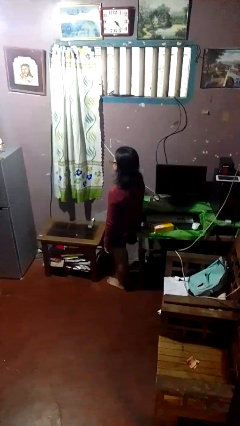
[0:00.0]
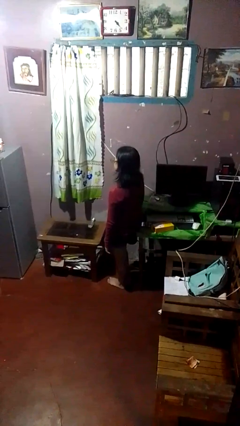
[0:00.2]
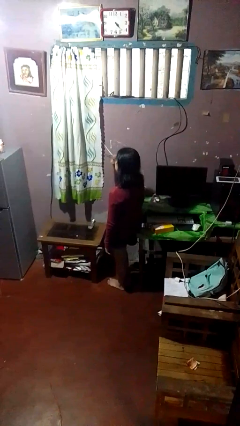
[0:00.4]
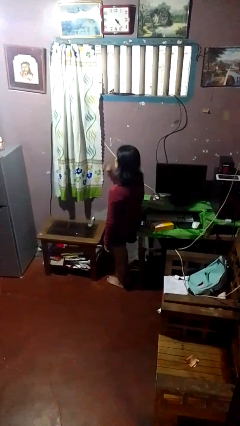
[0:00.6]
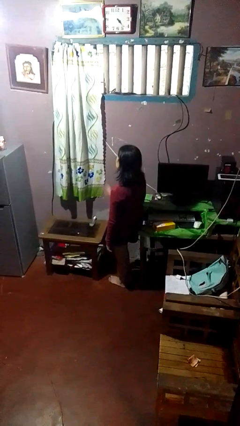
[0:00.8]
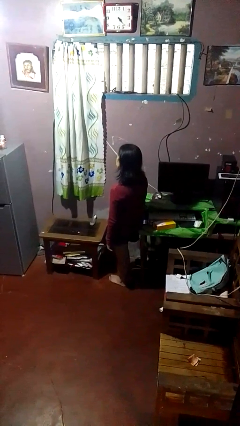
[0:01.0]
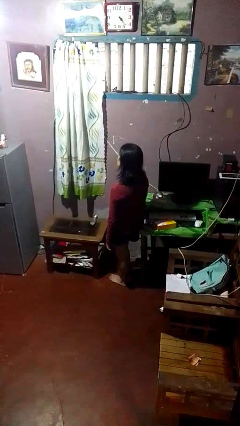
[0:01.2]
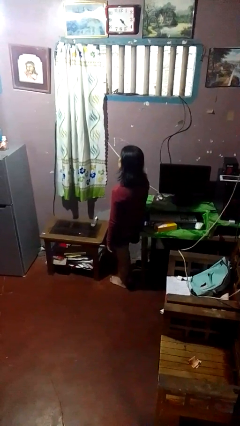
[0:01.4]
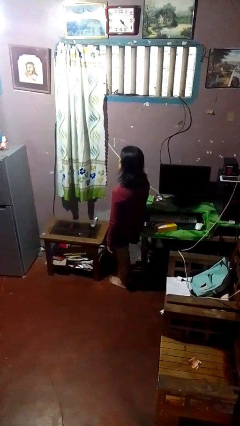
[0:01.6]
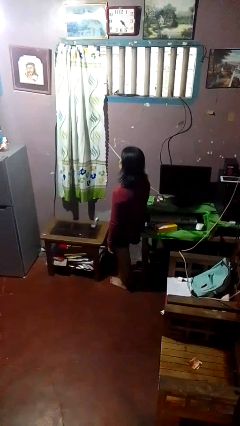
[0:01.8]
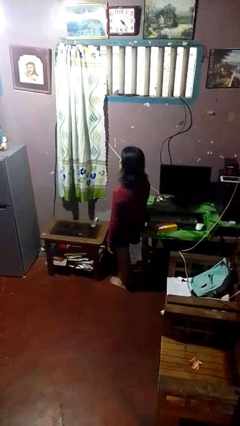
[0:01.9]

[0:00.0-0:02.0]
person takes off glasses

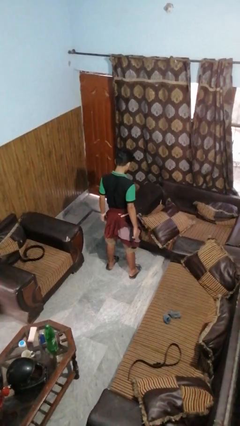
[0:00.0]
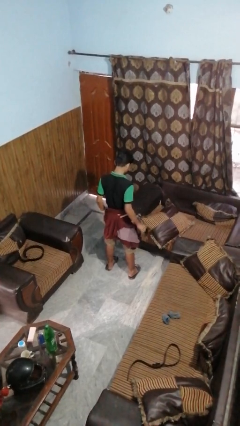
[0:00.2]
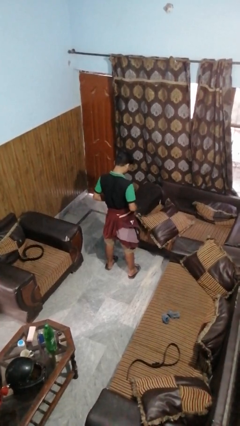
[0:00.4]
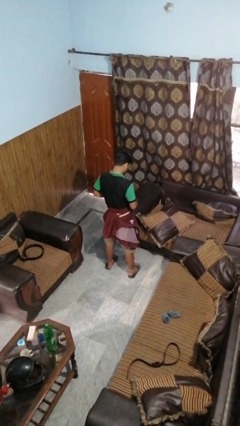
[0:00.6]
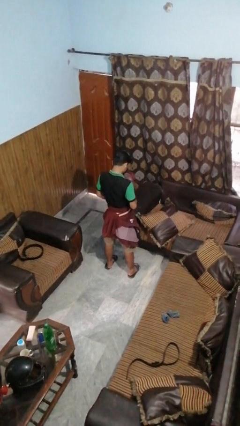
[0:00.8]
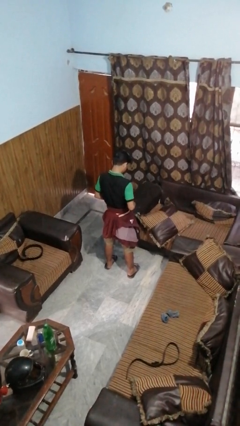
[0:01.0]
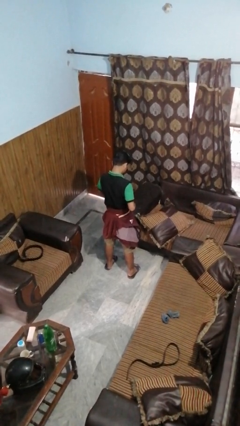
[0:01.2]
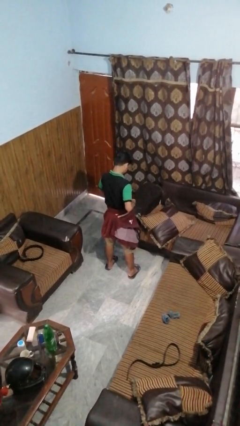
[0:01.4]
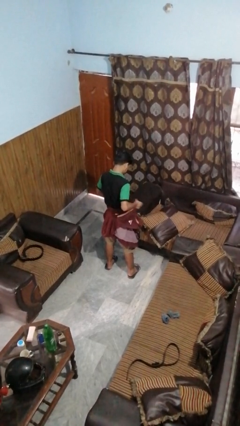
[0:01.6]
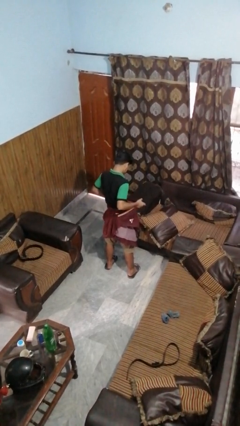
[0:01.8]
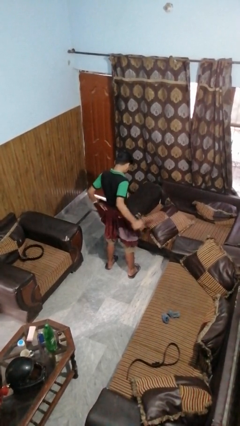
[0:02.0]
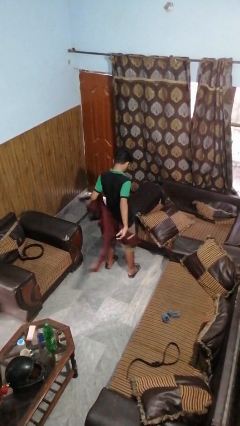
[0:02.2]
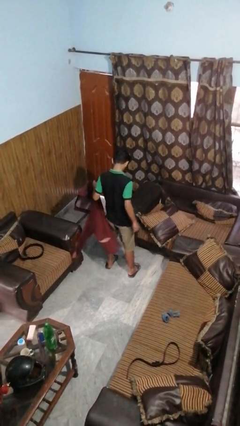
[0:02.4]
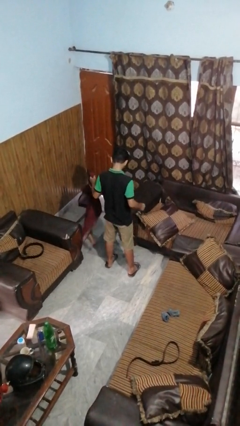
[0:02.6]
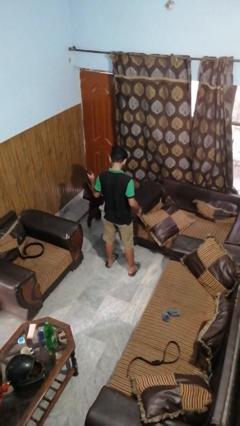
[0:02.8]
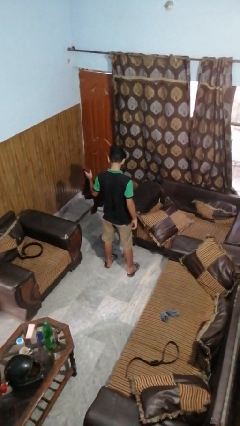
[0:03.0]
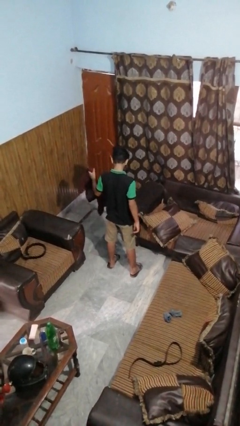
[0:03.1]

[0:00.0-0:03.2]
person unties jacket around waist

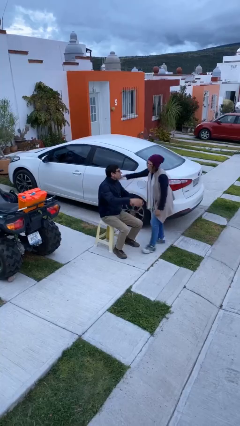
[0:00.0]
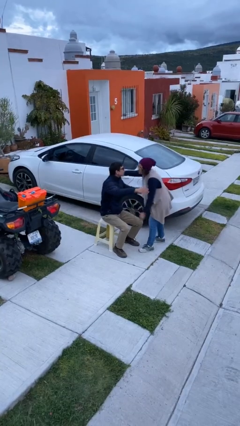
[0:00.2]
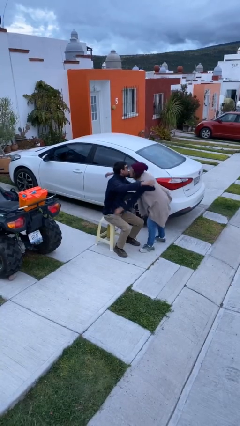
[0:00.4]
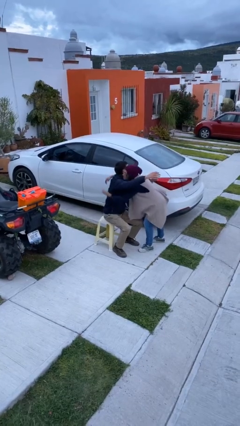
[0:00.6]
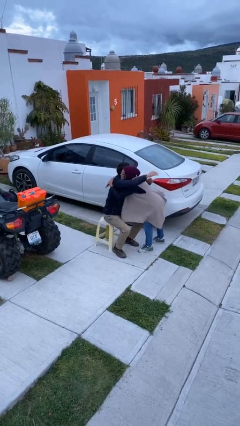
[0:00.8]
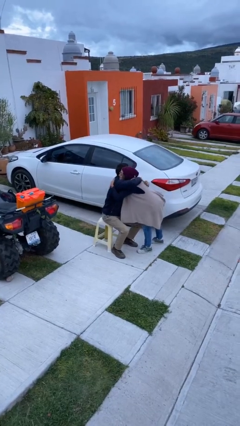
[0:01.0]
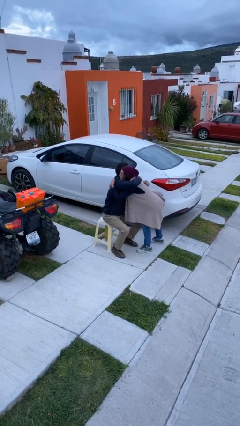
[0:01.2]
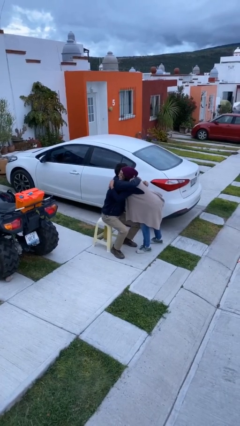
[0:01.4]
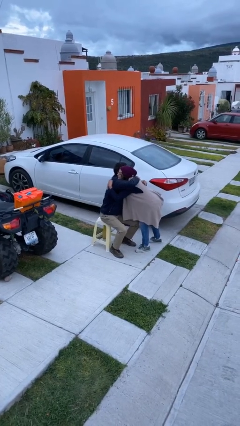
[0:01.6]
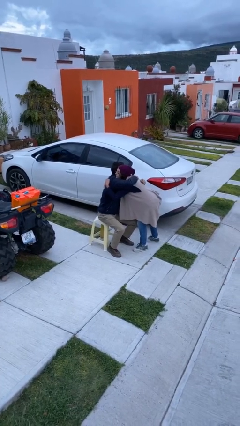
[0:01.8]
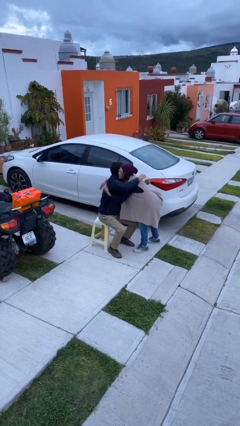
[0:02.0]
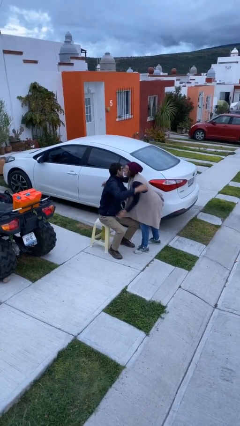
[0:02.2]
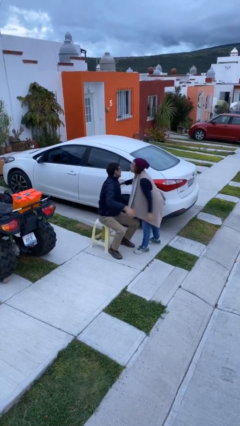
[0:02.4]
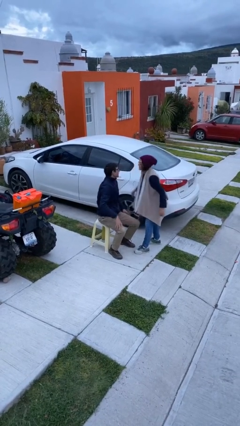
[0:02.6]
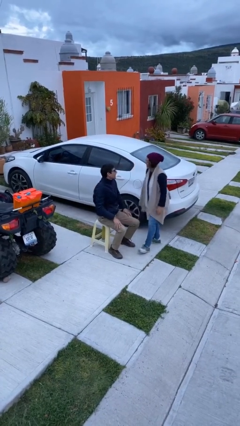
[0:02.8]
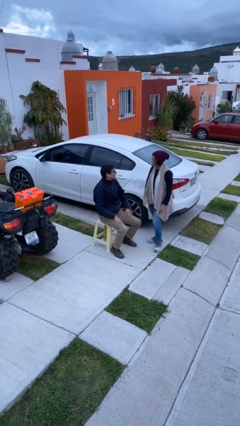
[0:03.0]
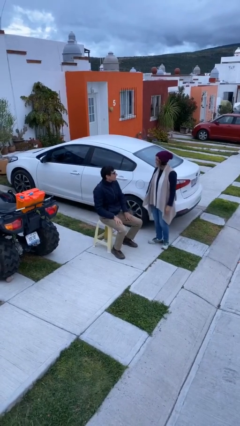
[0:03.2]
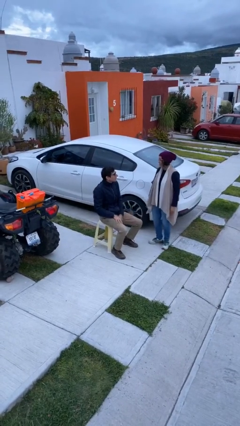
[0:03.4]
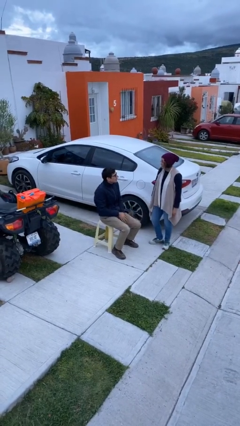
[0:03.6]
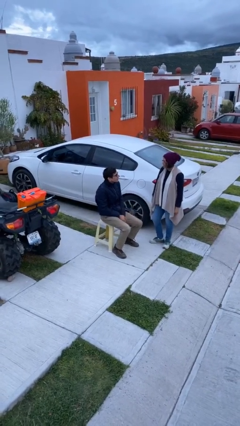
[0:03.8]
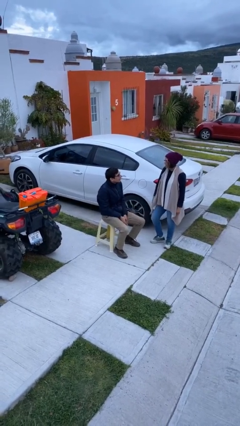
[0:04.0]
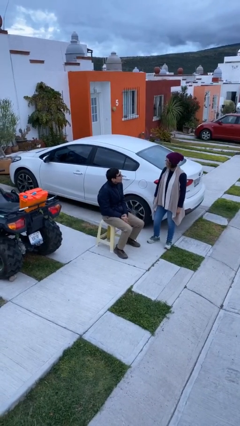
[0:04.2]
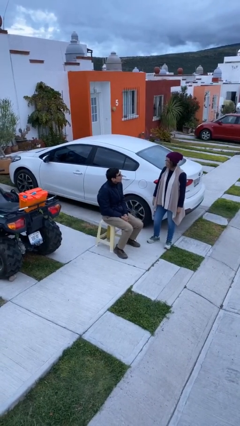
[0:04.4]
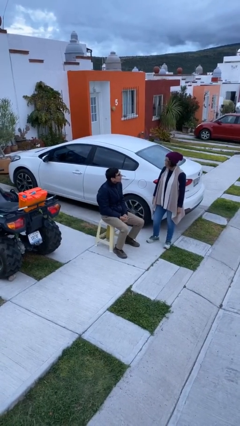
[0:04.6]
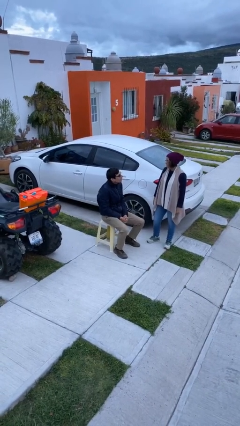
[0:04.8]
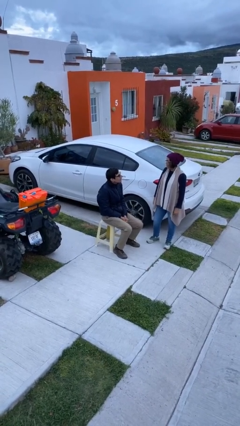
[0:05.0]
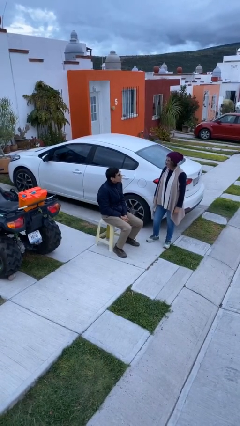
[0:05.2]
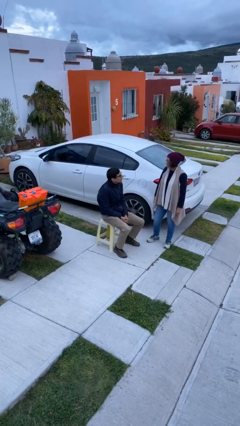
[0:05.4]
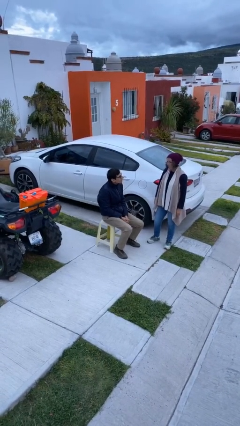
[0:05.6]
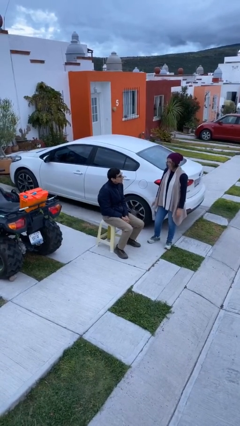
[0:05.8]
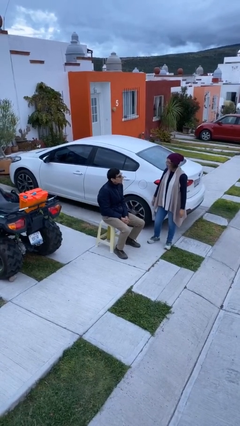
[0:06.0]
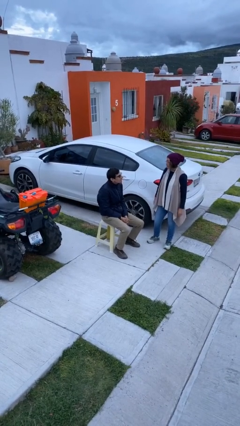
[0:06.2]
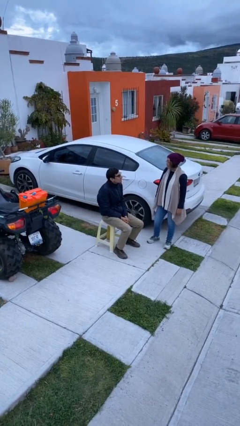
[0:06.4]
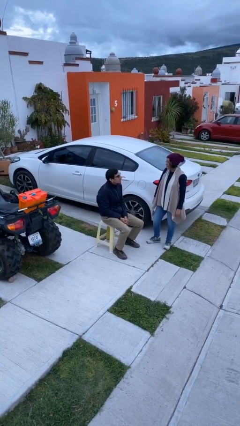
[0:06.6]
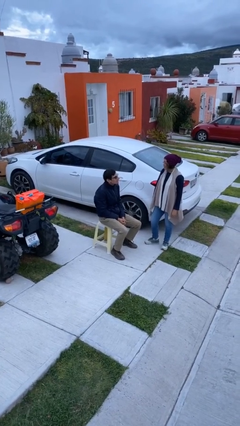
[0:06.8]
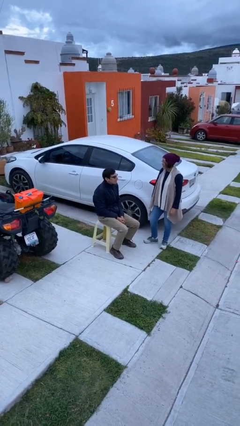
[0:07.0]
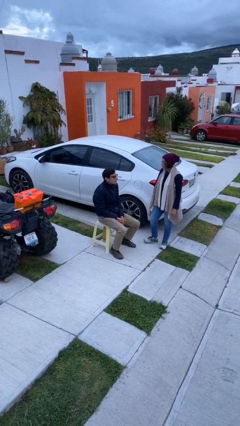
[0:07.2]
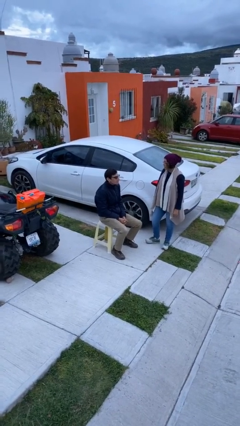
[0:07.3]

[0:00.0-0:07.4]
person embraces person

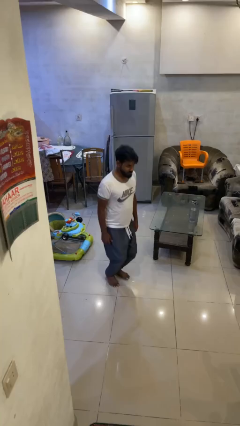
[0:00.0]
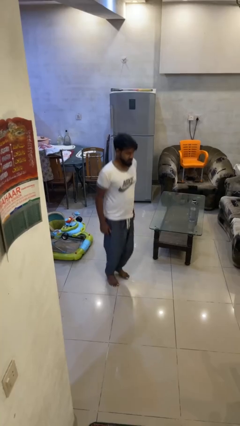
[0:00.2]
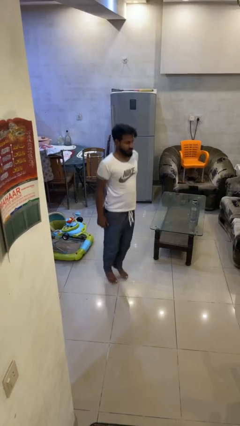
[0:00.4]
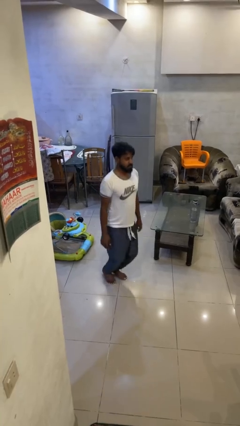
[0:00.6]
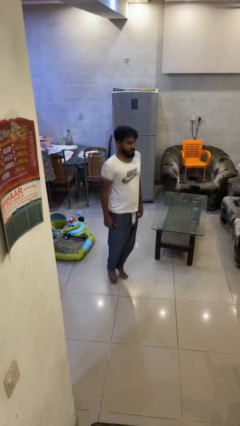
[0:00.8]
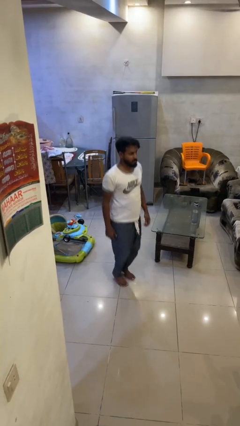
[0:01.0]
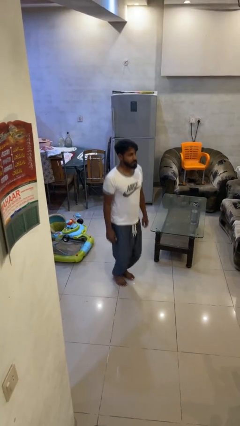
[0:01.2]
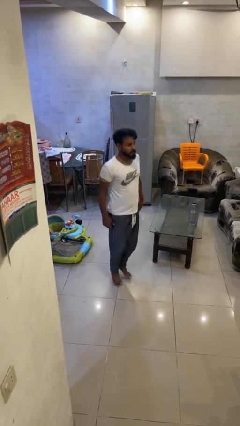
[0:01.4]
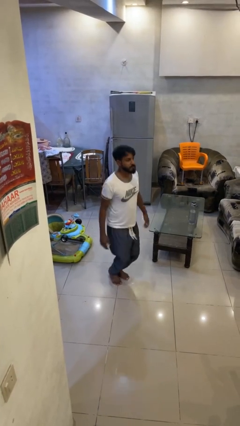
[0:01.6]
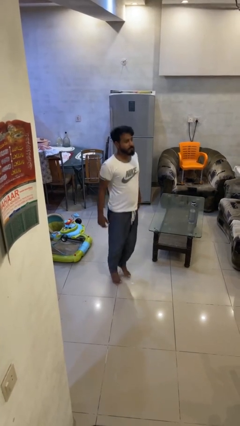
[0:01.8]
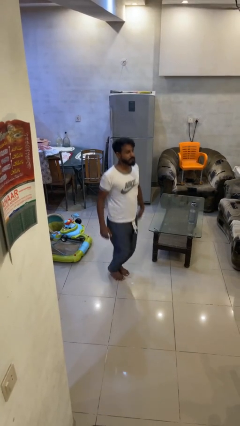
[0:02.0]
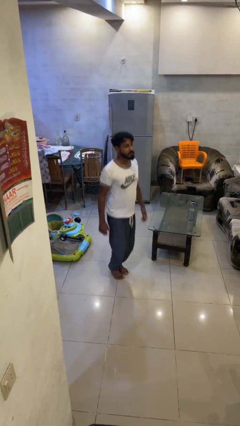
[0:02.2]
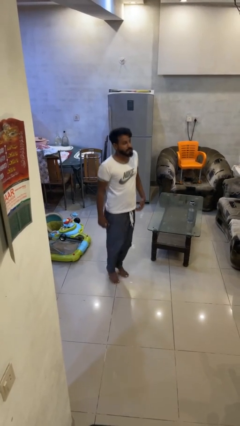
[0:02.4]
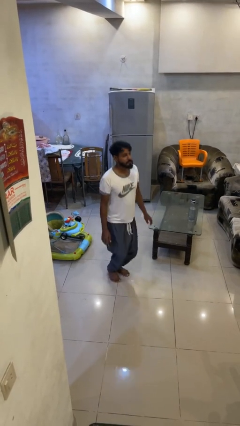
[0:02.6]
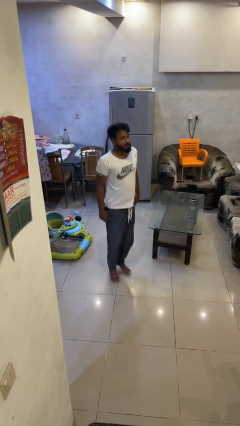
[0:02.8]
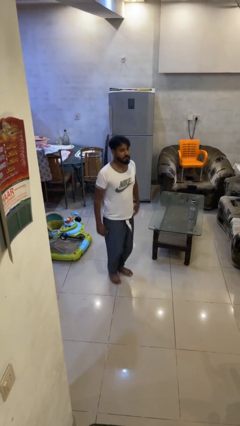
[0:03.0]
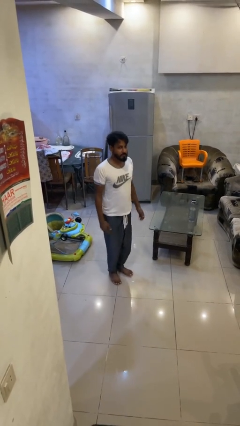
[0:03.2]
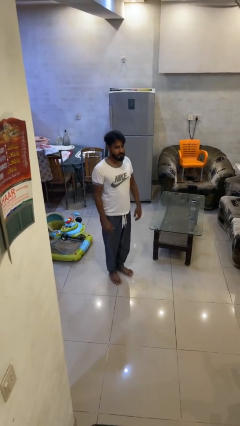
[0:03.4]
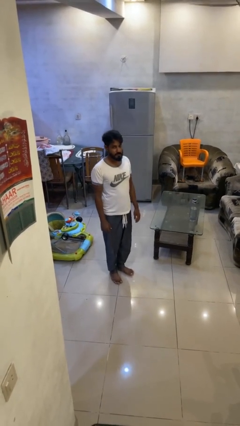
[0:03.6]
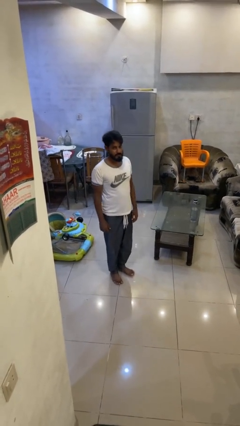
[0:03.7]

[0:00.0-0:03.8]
person jumps

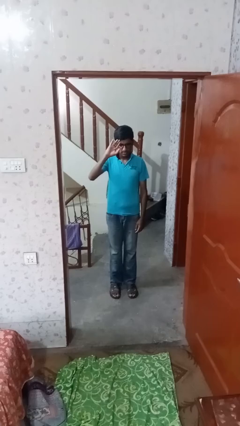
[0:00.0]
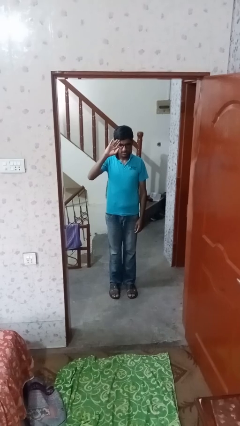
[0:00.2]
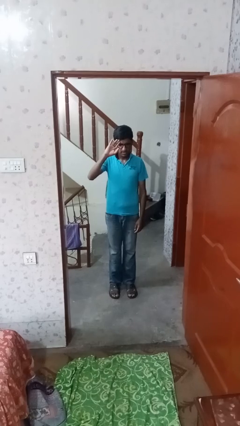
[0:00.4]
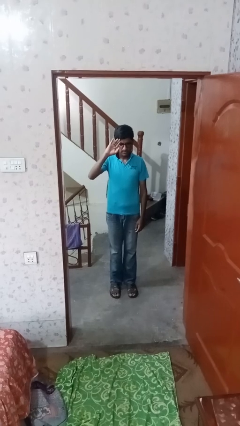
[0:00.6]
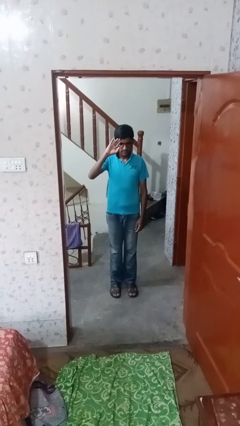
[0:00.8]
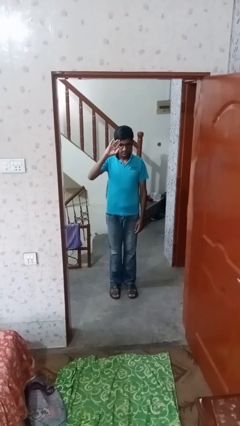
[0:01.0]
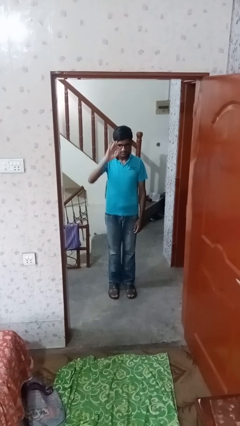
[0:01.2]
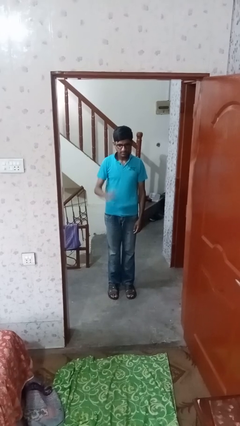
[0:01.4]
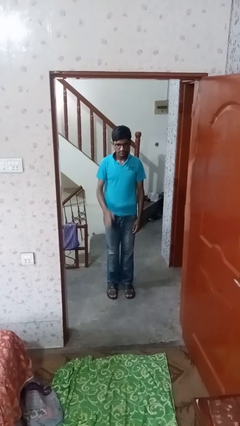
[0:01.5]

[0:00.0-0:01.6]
person salutes
